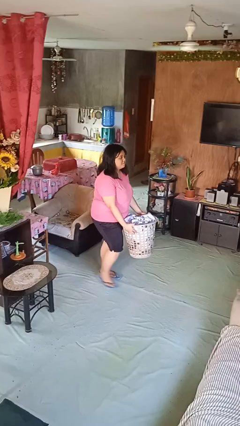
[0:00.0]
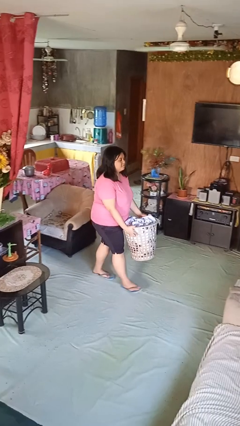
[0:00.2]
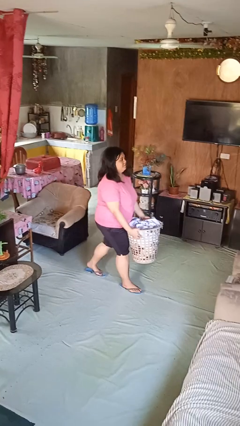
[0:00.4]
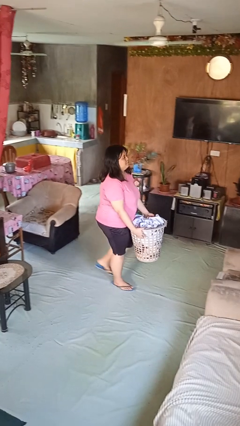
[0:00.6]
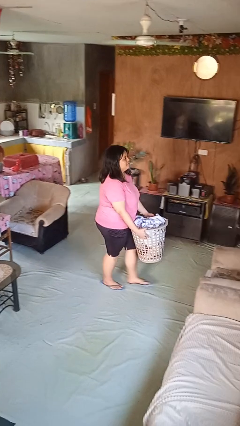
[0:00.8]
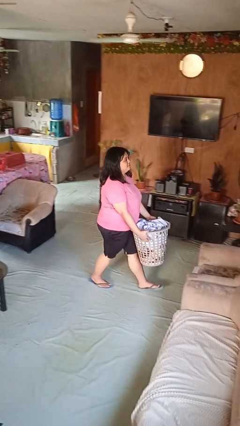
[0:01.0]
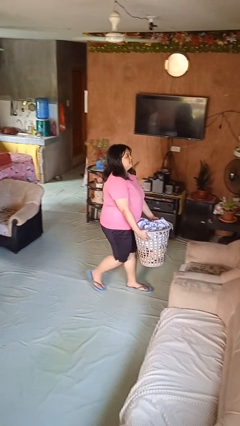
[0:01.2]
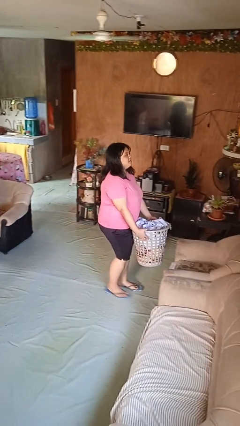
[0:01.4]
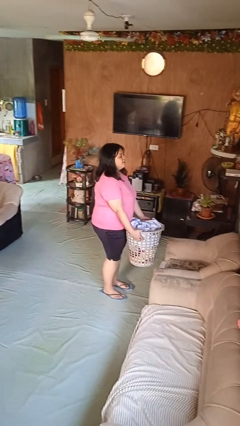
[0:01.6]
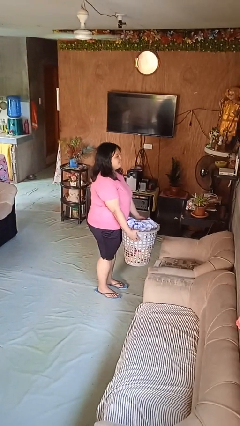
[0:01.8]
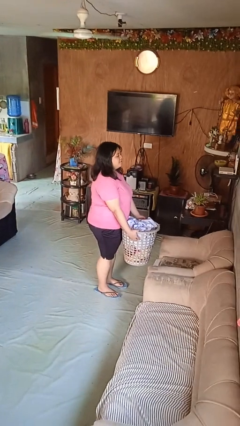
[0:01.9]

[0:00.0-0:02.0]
person carries laundry basket

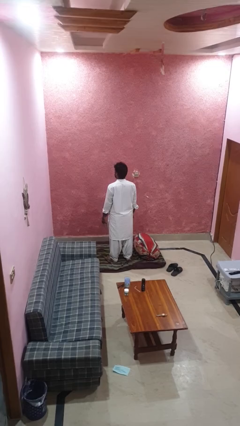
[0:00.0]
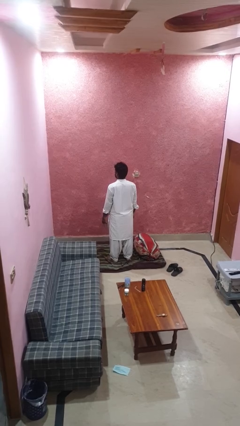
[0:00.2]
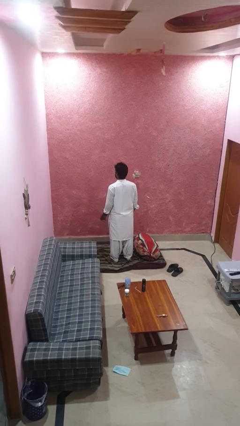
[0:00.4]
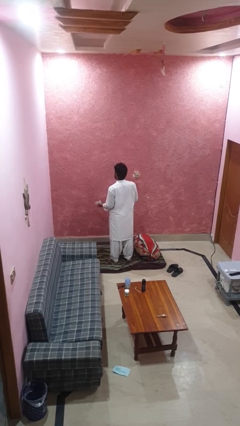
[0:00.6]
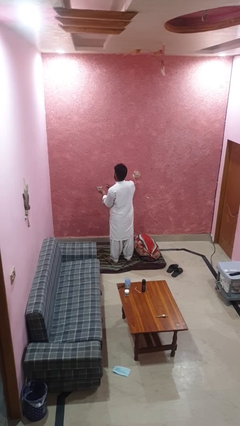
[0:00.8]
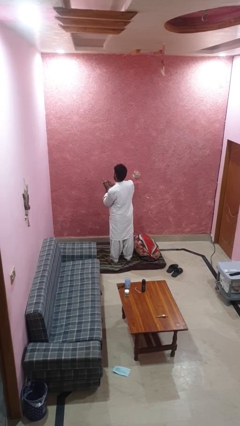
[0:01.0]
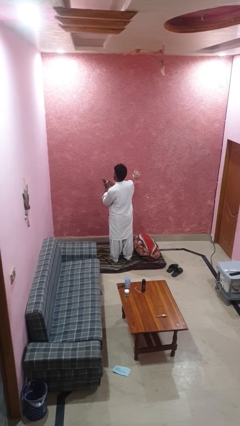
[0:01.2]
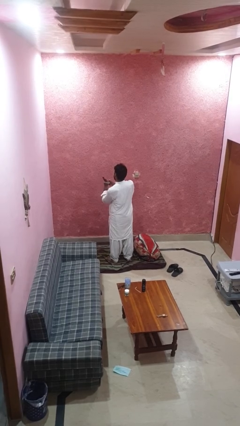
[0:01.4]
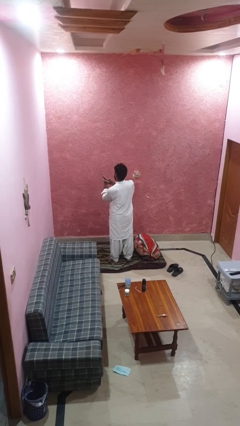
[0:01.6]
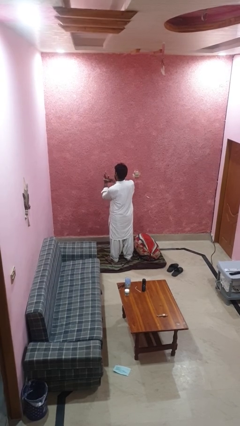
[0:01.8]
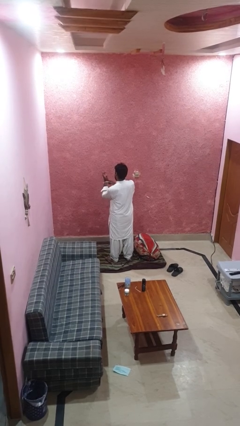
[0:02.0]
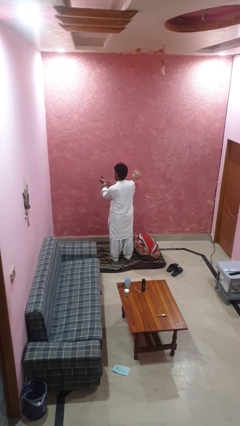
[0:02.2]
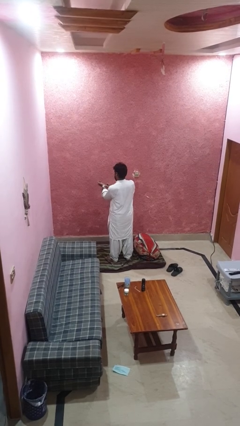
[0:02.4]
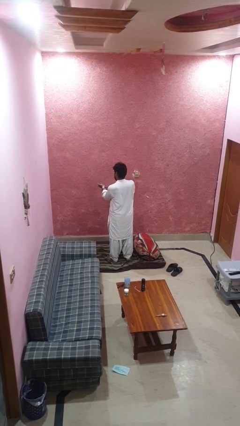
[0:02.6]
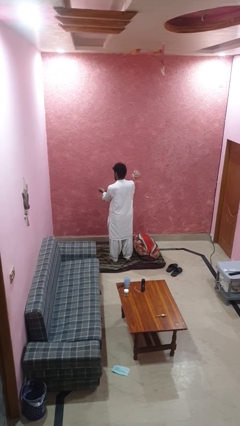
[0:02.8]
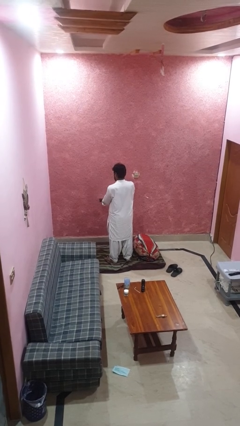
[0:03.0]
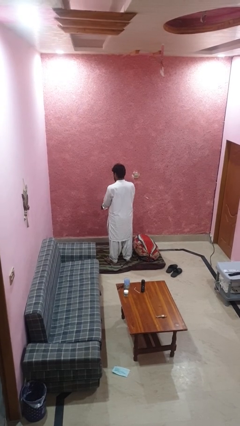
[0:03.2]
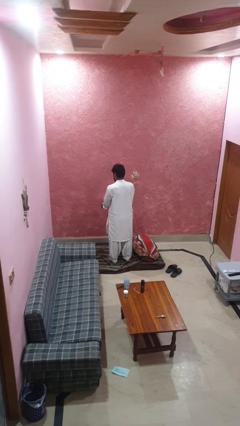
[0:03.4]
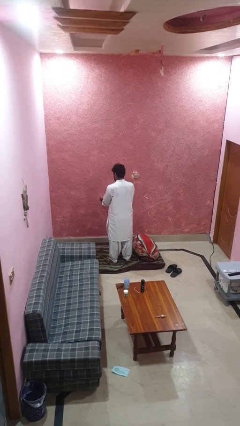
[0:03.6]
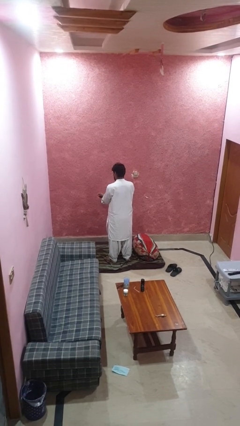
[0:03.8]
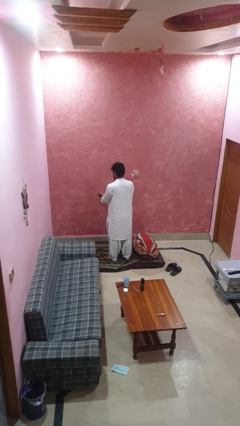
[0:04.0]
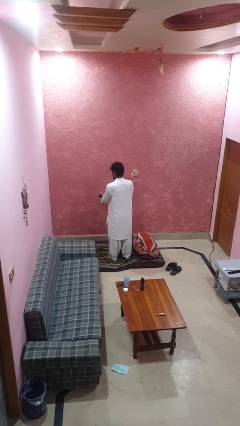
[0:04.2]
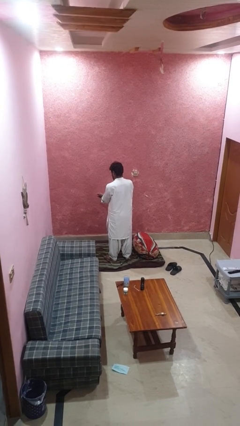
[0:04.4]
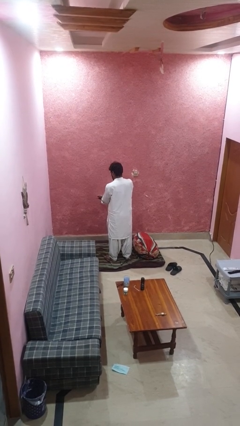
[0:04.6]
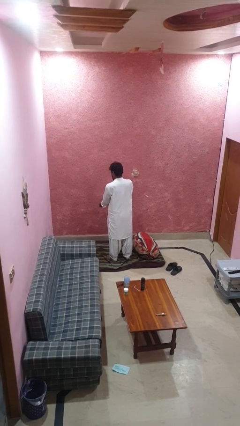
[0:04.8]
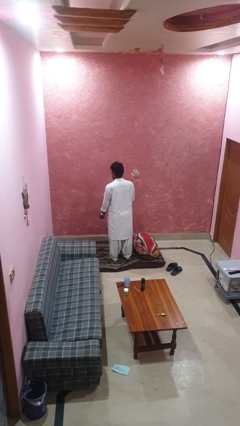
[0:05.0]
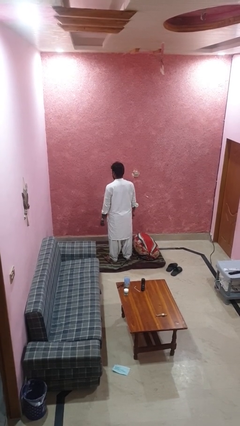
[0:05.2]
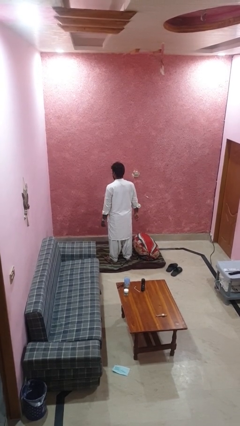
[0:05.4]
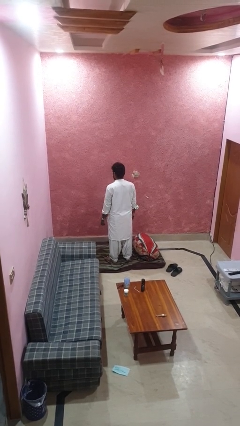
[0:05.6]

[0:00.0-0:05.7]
person puts on wristwatch

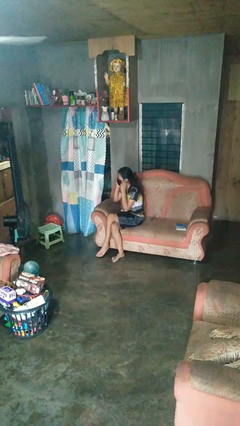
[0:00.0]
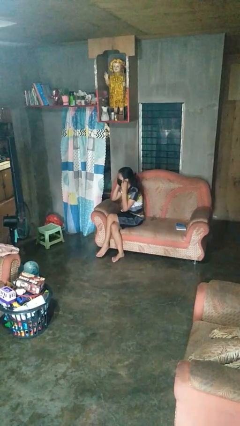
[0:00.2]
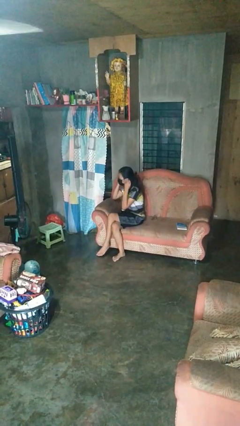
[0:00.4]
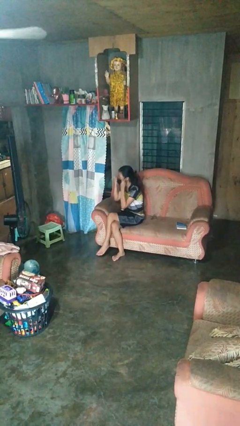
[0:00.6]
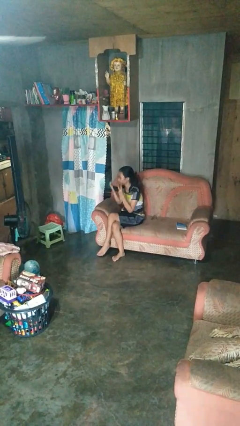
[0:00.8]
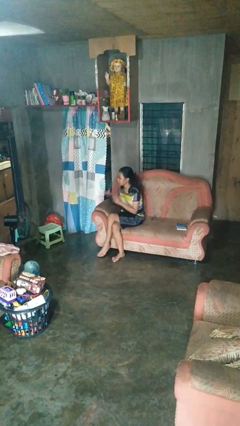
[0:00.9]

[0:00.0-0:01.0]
person takes off facemask

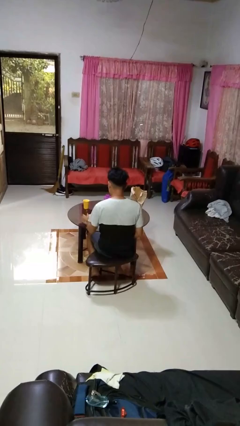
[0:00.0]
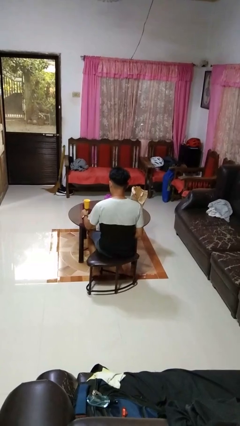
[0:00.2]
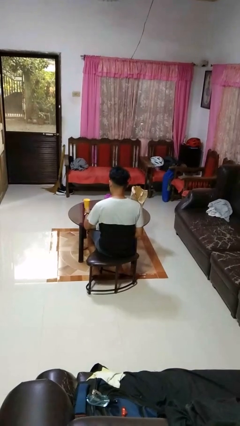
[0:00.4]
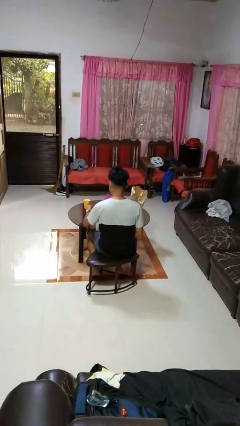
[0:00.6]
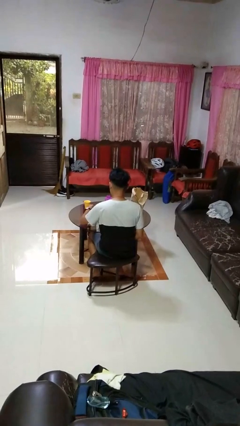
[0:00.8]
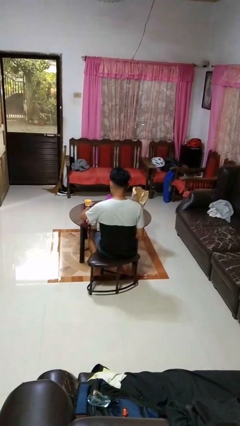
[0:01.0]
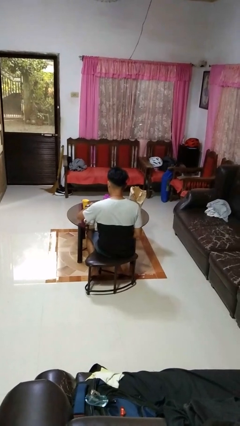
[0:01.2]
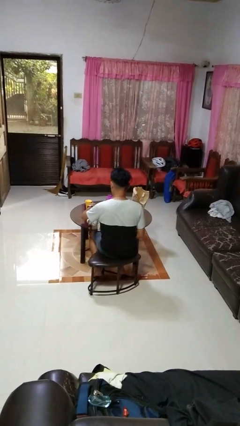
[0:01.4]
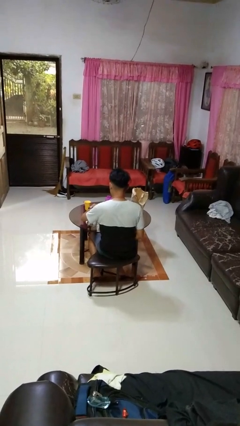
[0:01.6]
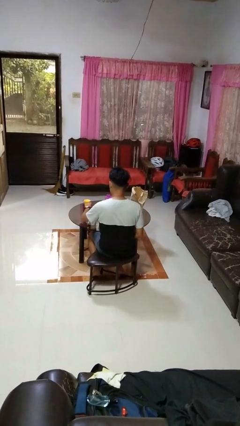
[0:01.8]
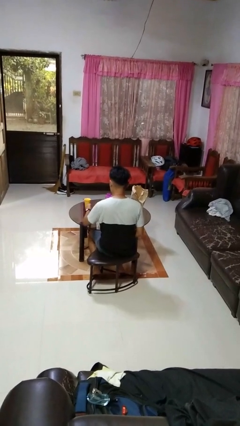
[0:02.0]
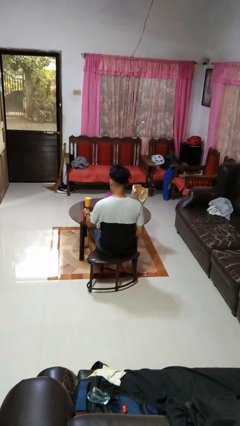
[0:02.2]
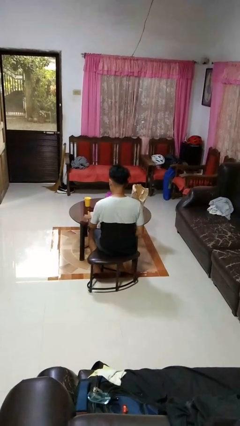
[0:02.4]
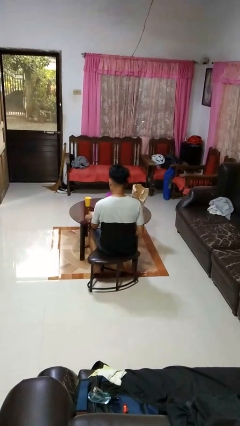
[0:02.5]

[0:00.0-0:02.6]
person stirs mug

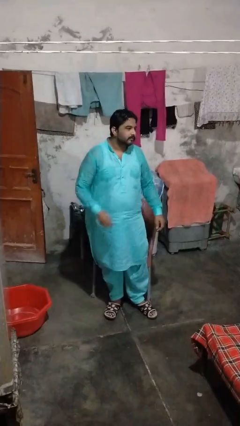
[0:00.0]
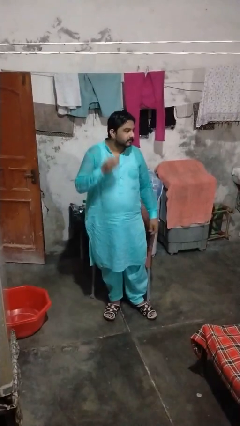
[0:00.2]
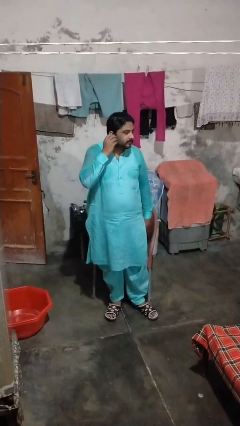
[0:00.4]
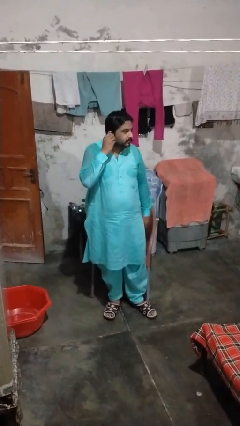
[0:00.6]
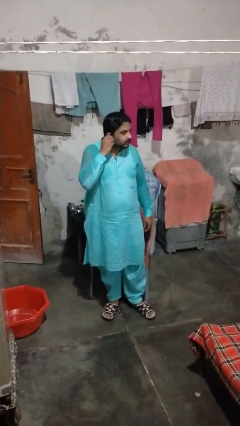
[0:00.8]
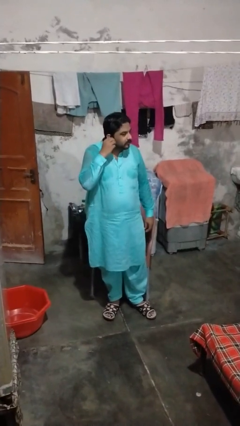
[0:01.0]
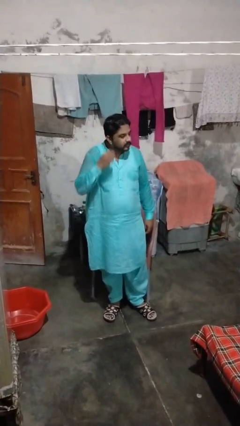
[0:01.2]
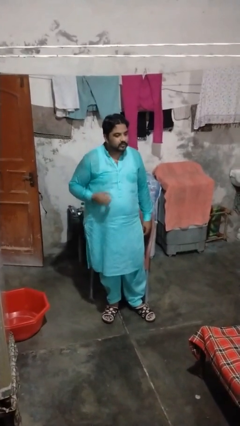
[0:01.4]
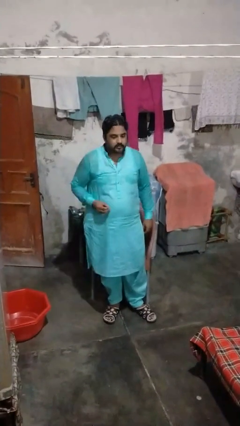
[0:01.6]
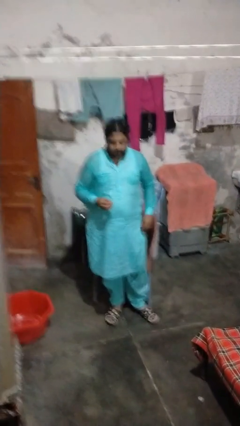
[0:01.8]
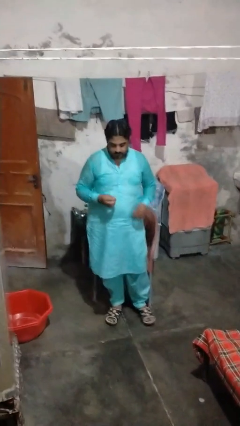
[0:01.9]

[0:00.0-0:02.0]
person takes off earrings

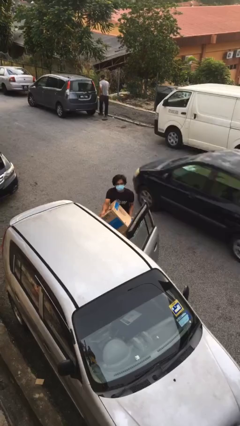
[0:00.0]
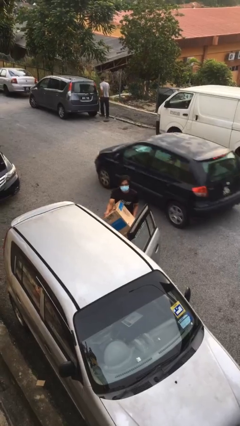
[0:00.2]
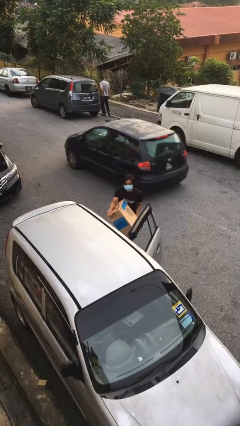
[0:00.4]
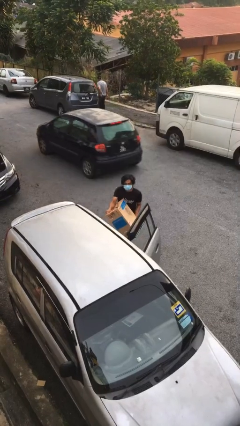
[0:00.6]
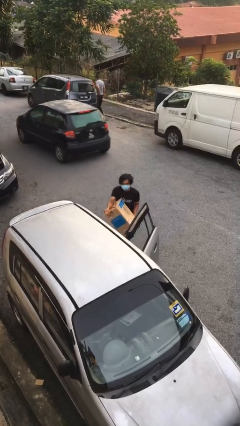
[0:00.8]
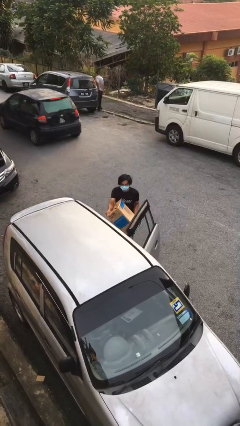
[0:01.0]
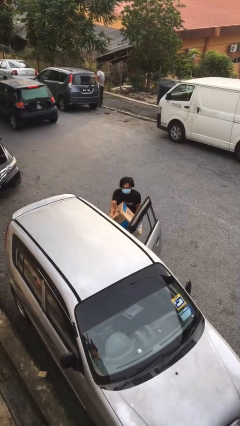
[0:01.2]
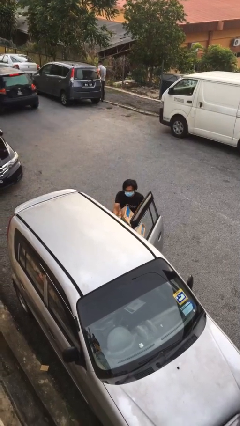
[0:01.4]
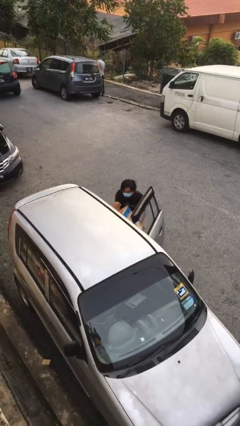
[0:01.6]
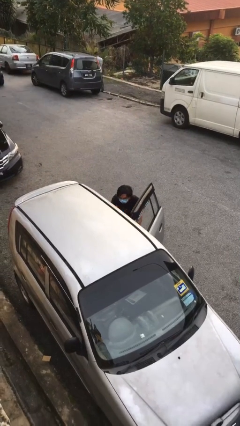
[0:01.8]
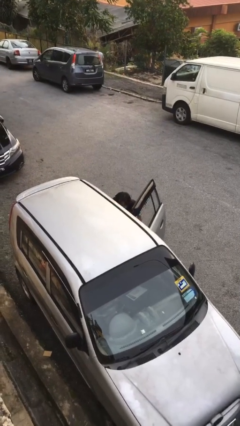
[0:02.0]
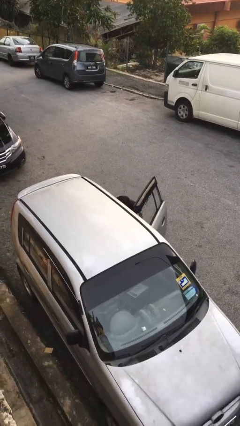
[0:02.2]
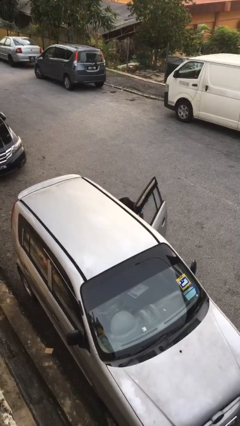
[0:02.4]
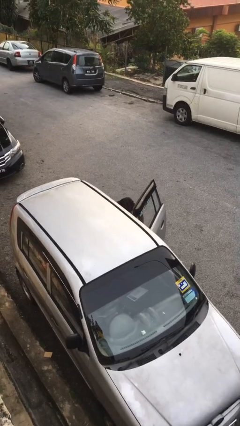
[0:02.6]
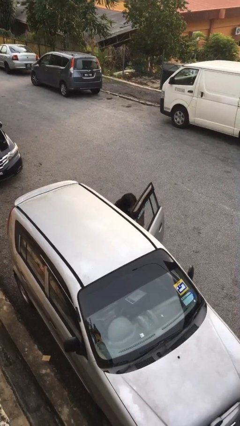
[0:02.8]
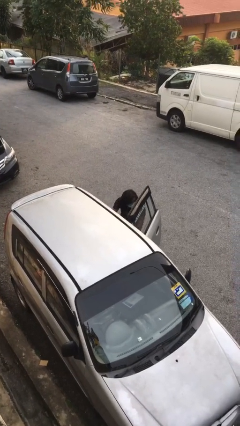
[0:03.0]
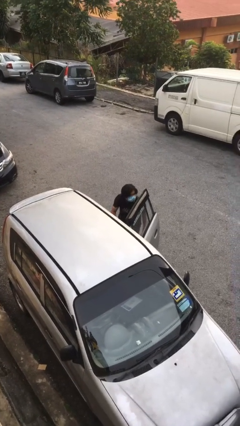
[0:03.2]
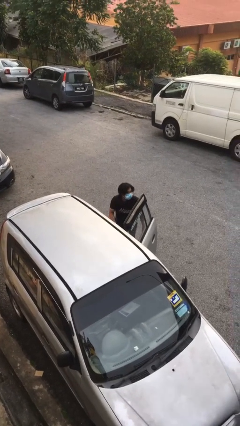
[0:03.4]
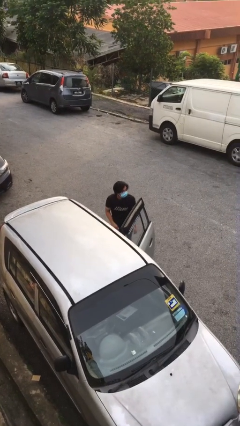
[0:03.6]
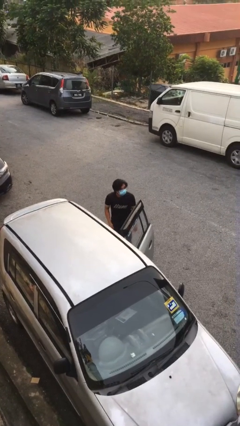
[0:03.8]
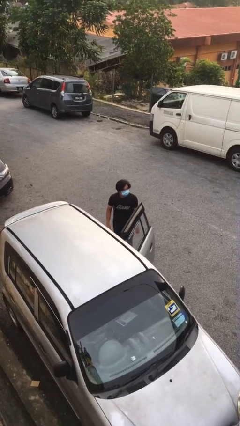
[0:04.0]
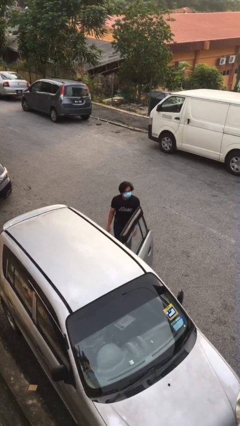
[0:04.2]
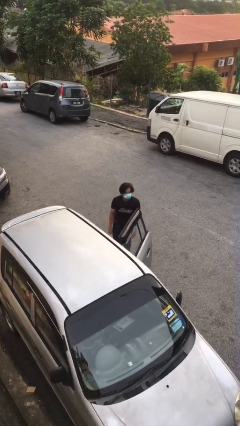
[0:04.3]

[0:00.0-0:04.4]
person loads car
